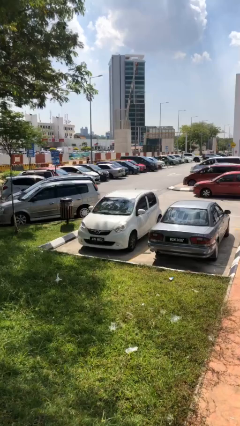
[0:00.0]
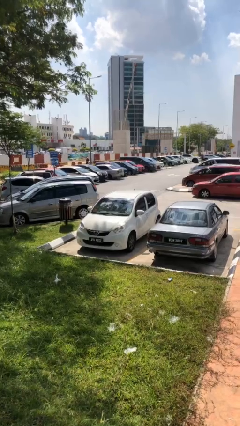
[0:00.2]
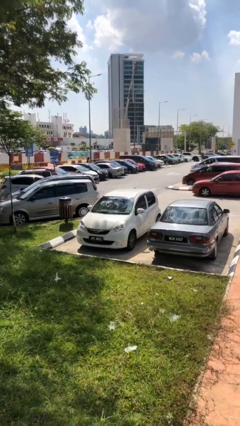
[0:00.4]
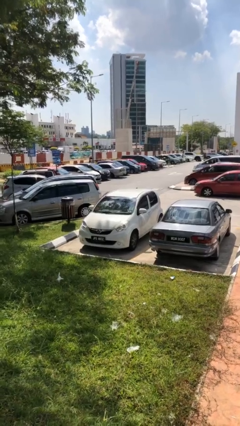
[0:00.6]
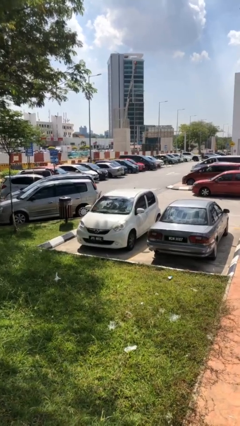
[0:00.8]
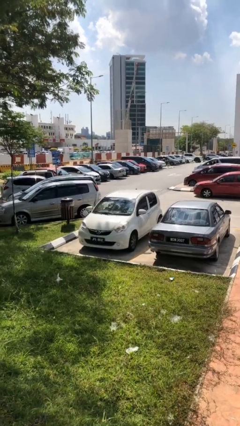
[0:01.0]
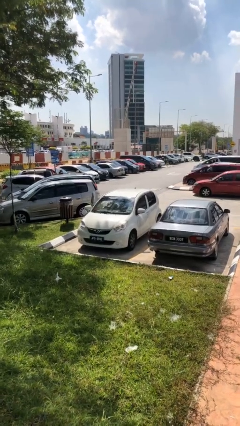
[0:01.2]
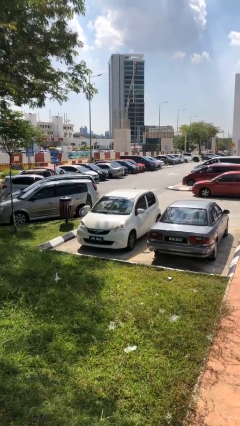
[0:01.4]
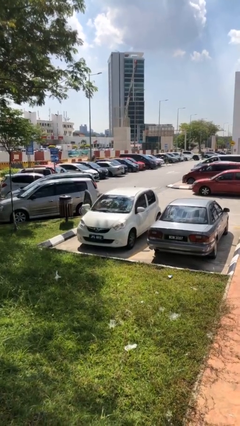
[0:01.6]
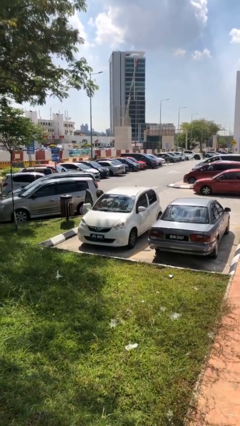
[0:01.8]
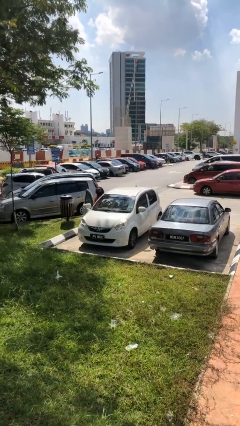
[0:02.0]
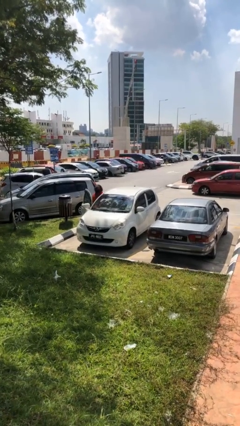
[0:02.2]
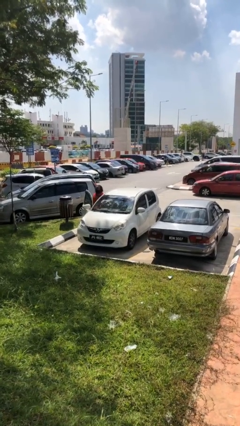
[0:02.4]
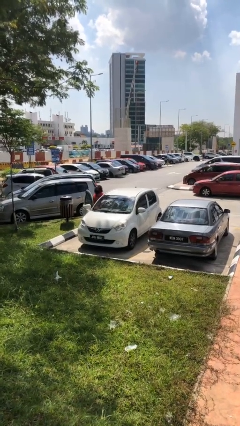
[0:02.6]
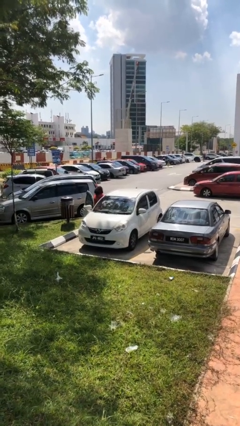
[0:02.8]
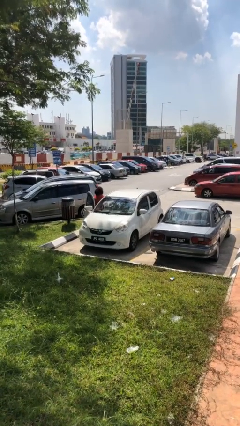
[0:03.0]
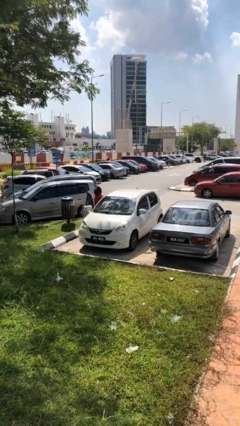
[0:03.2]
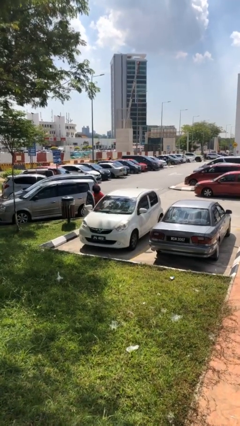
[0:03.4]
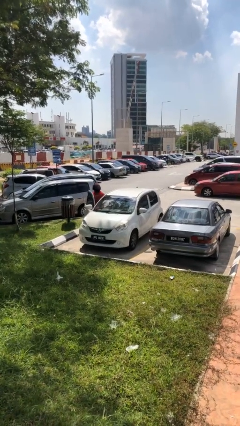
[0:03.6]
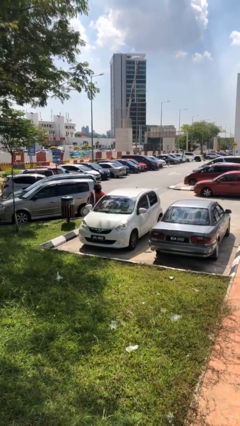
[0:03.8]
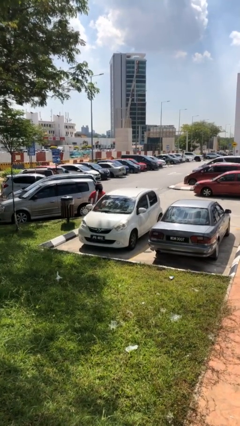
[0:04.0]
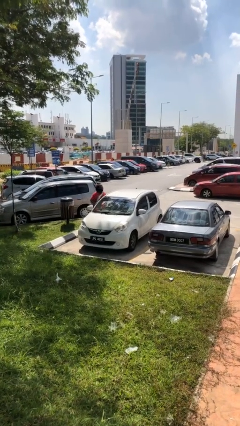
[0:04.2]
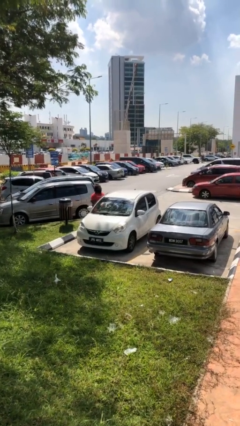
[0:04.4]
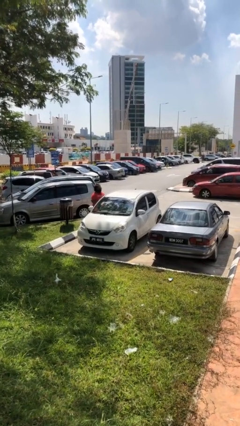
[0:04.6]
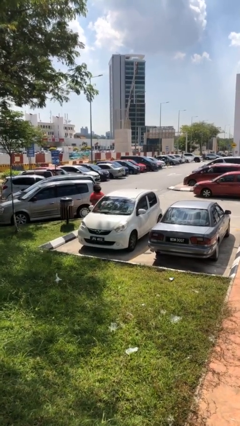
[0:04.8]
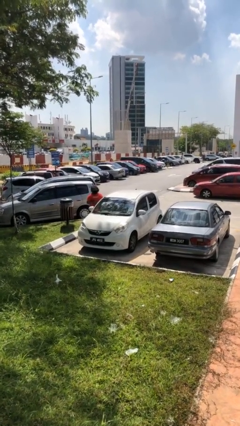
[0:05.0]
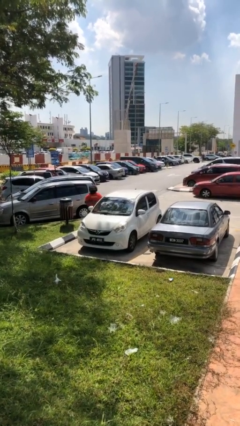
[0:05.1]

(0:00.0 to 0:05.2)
car drops off person

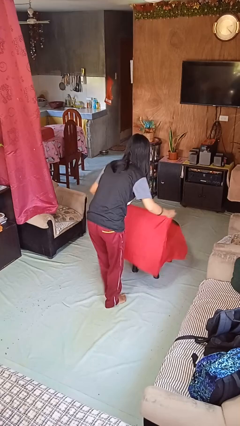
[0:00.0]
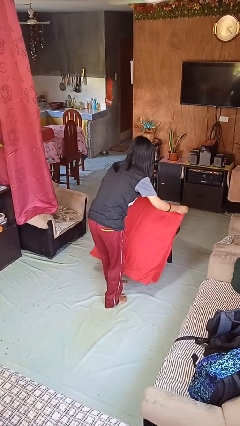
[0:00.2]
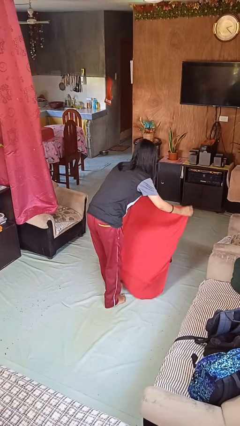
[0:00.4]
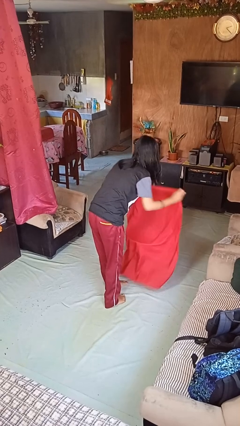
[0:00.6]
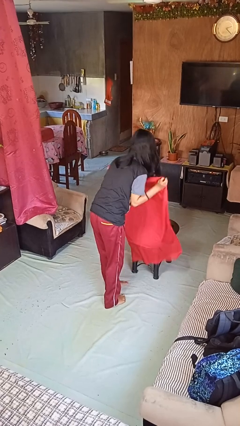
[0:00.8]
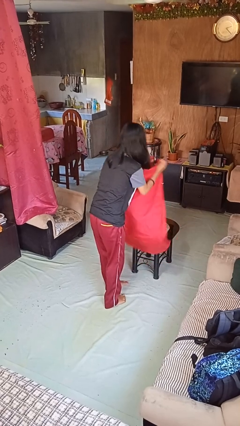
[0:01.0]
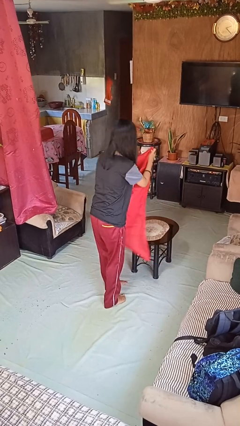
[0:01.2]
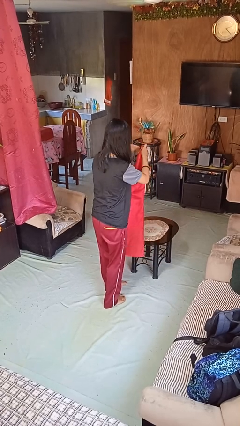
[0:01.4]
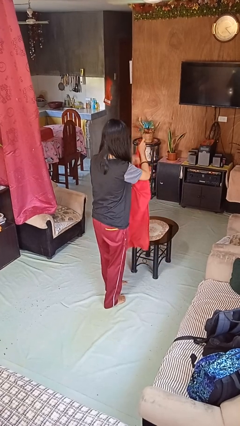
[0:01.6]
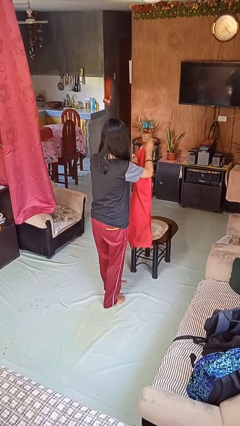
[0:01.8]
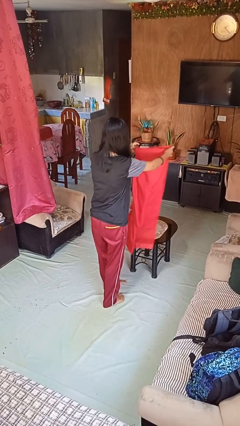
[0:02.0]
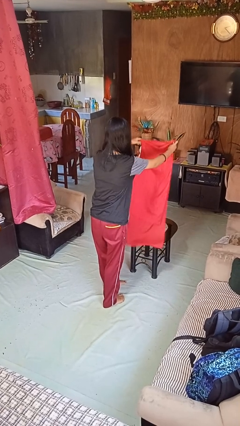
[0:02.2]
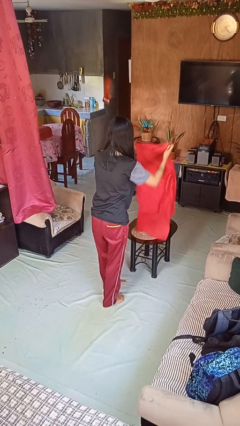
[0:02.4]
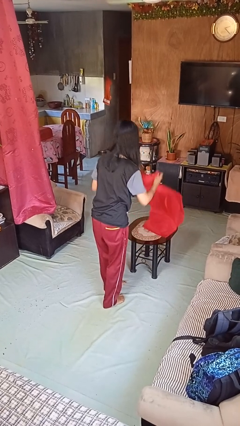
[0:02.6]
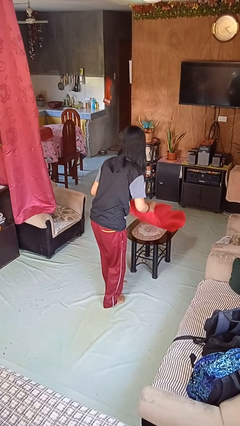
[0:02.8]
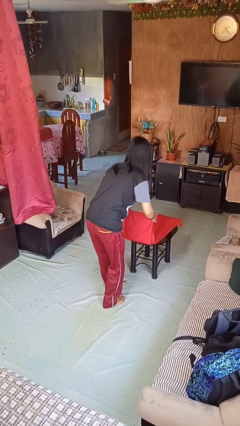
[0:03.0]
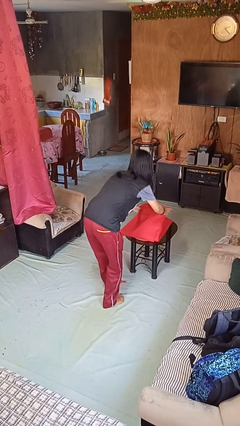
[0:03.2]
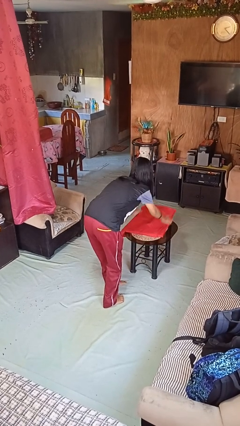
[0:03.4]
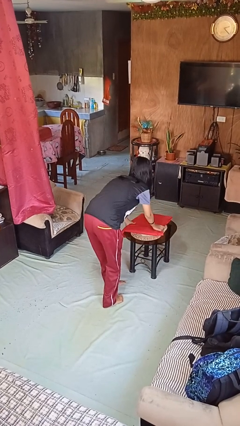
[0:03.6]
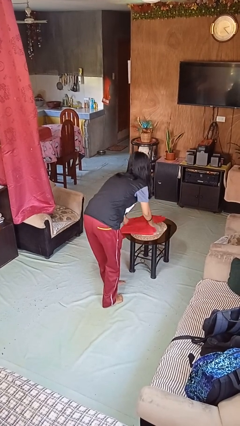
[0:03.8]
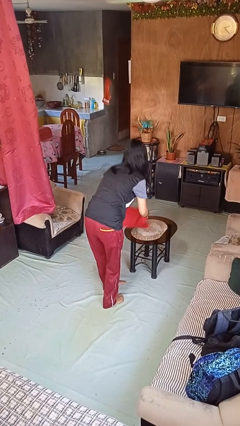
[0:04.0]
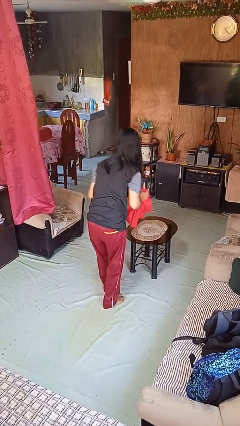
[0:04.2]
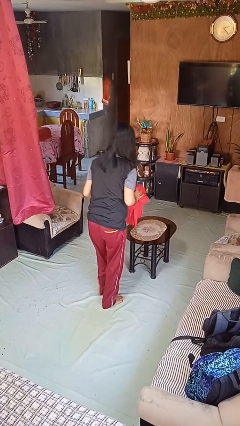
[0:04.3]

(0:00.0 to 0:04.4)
person folds tablecloth

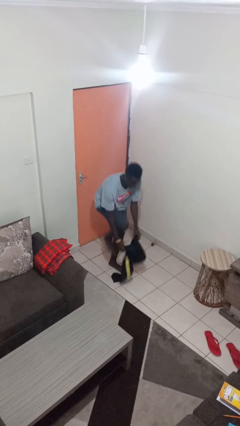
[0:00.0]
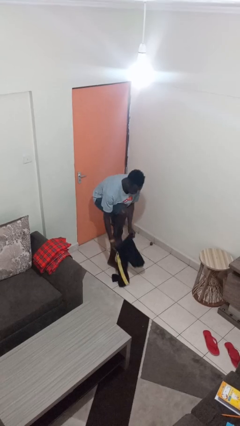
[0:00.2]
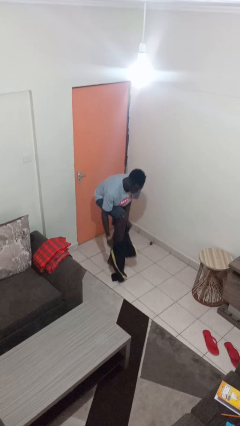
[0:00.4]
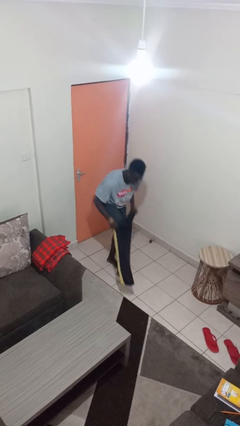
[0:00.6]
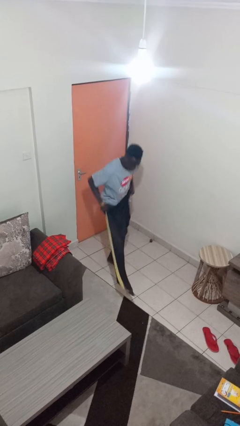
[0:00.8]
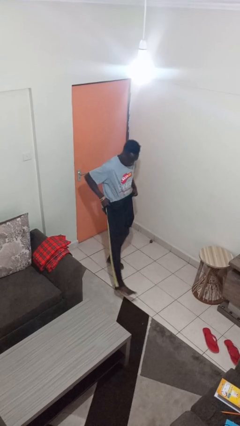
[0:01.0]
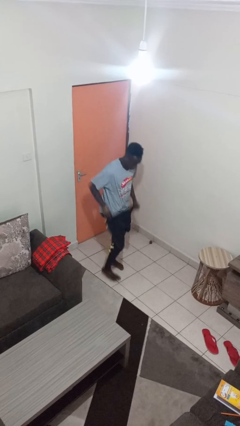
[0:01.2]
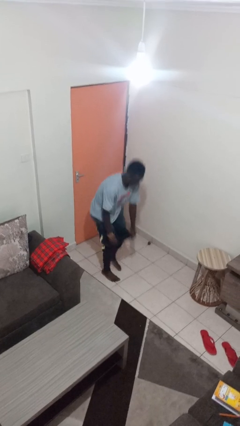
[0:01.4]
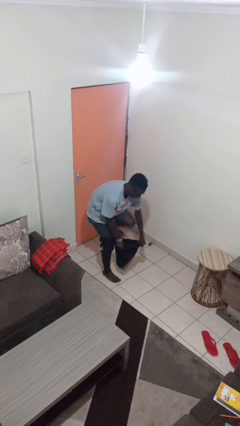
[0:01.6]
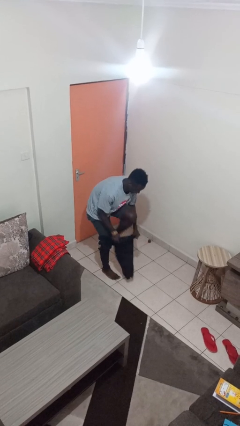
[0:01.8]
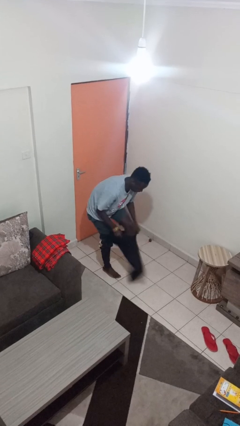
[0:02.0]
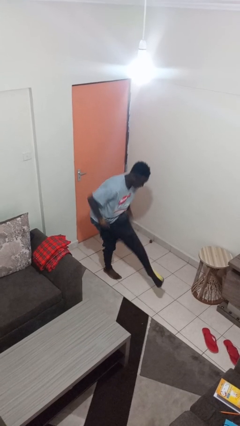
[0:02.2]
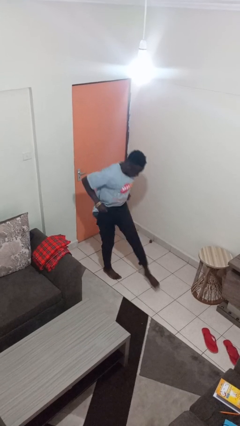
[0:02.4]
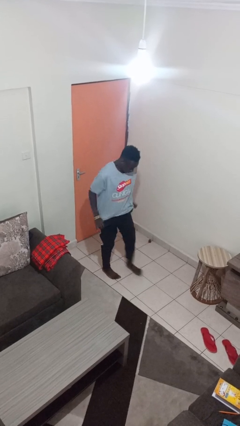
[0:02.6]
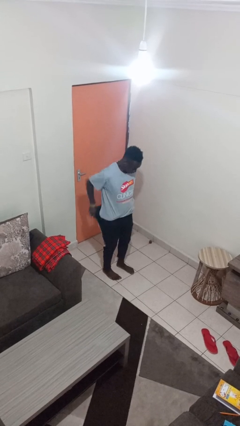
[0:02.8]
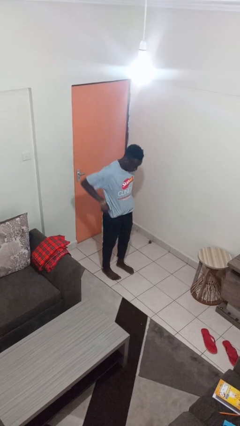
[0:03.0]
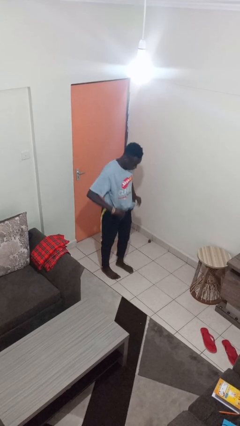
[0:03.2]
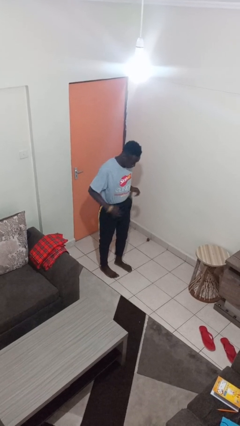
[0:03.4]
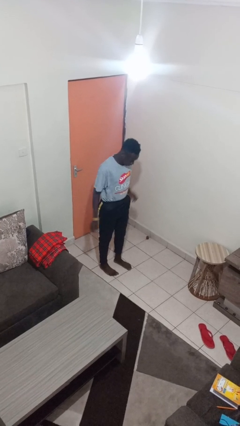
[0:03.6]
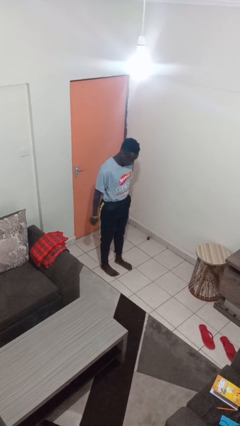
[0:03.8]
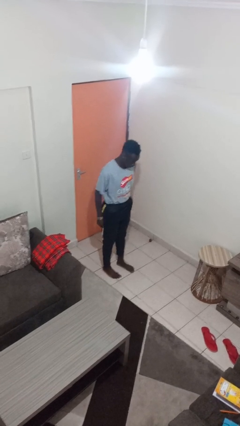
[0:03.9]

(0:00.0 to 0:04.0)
person puts on pants

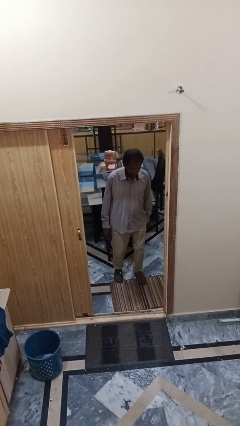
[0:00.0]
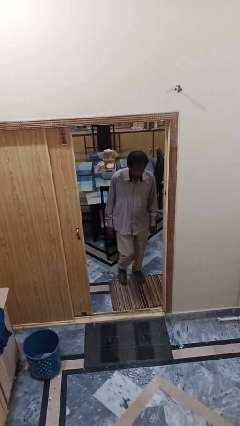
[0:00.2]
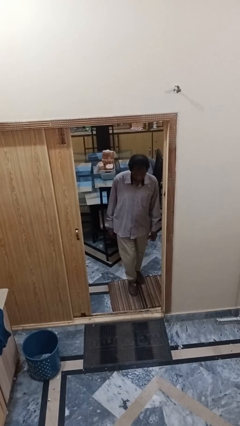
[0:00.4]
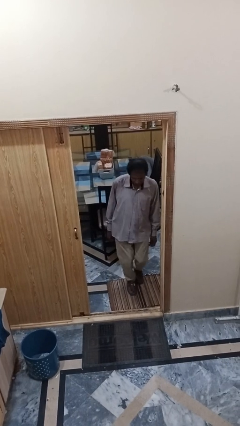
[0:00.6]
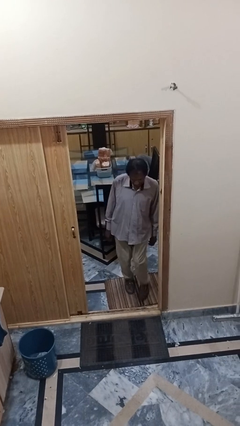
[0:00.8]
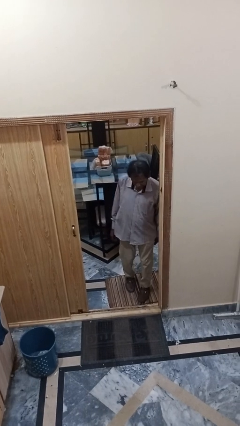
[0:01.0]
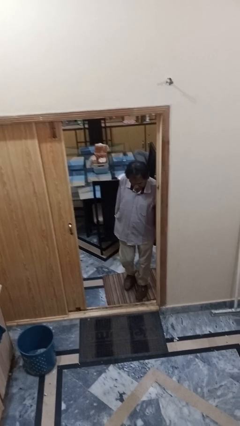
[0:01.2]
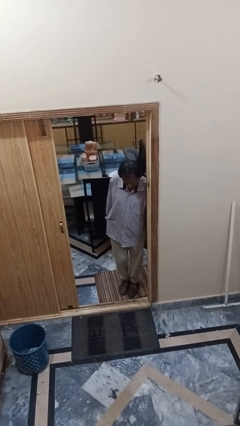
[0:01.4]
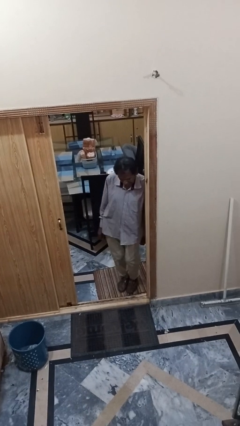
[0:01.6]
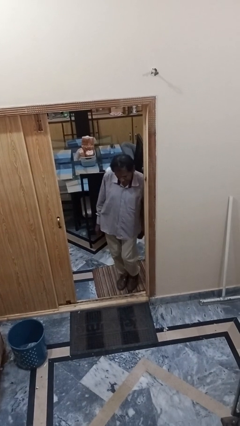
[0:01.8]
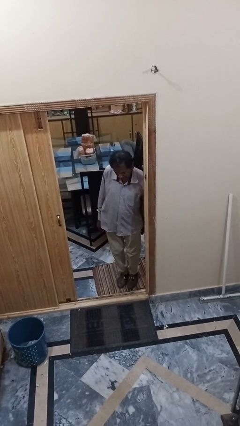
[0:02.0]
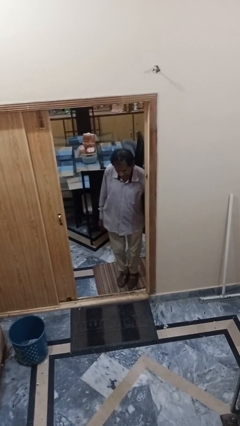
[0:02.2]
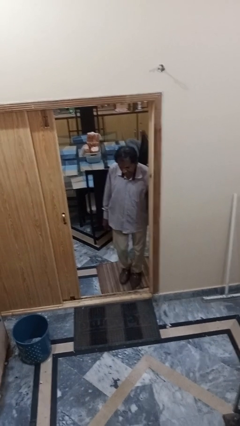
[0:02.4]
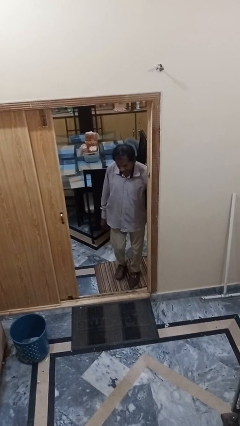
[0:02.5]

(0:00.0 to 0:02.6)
person bumps into wall

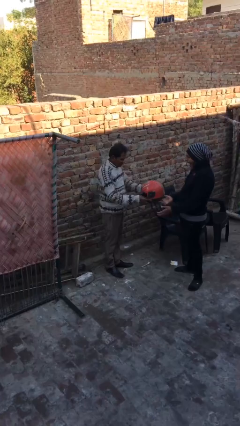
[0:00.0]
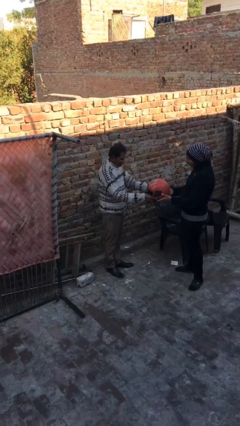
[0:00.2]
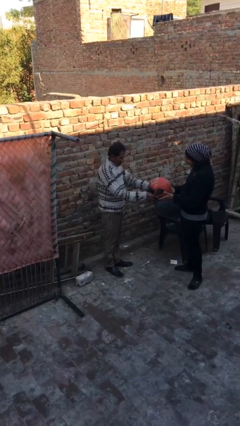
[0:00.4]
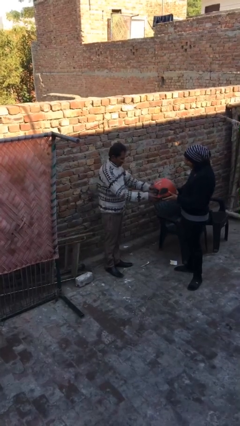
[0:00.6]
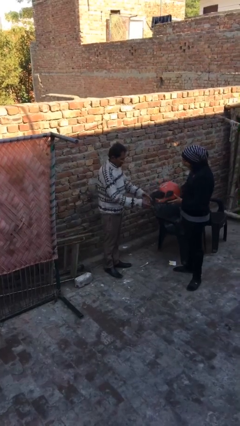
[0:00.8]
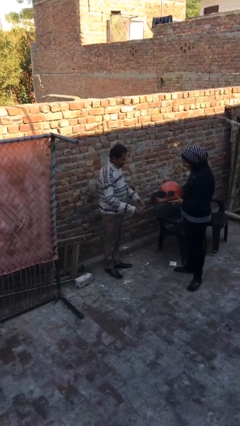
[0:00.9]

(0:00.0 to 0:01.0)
person transfers object to person

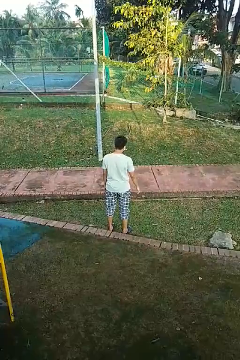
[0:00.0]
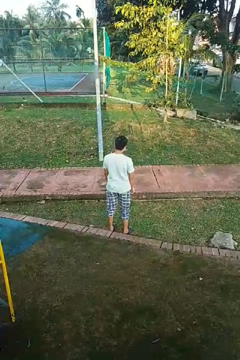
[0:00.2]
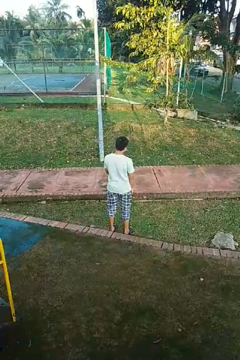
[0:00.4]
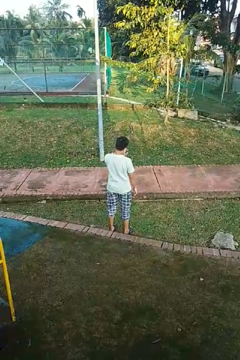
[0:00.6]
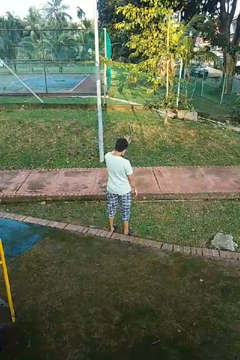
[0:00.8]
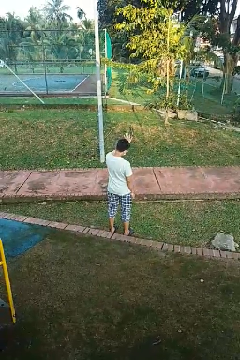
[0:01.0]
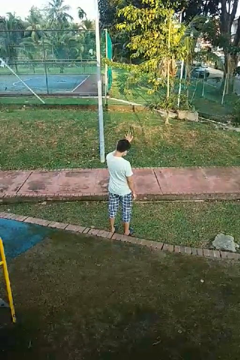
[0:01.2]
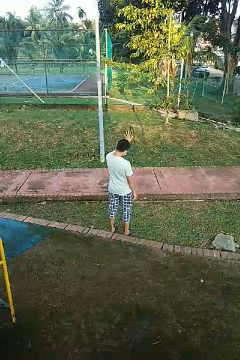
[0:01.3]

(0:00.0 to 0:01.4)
person gestures stop
